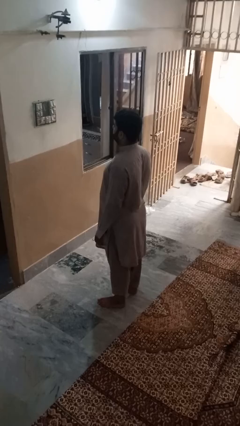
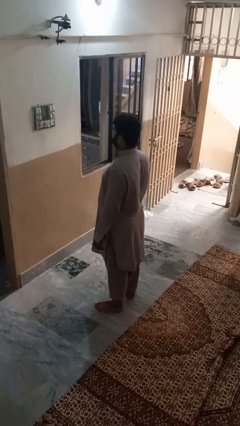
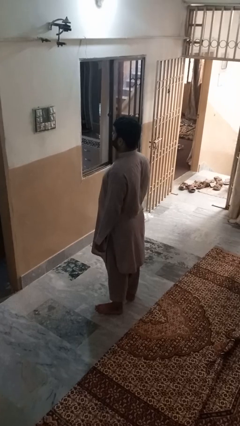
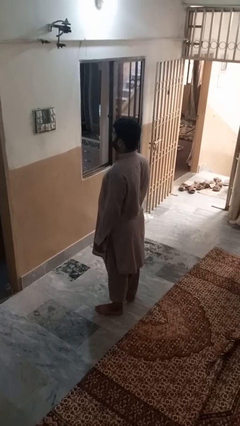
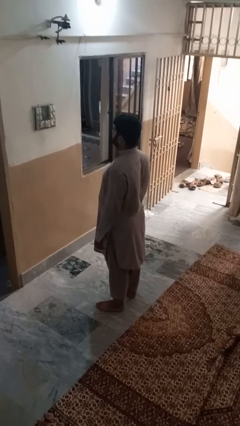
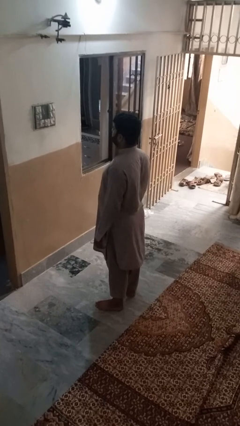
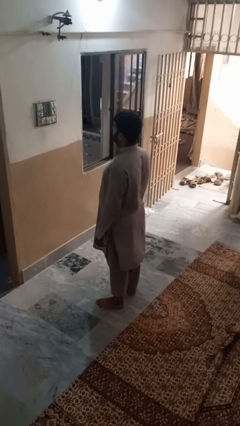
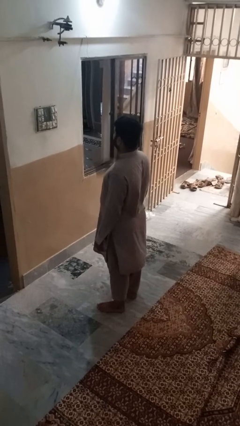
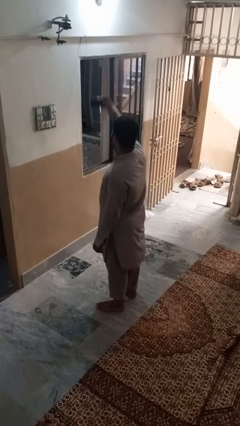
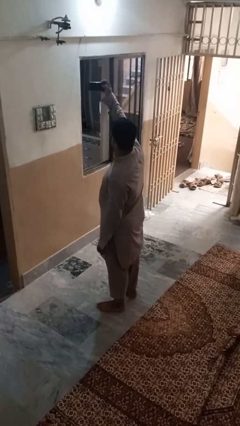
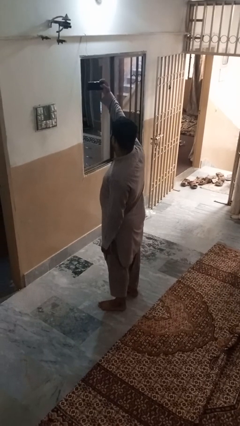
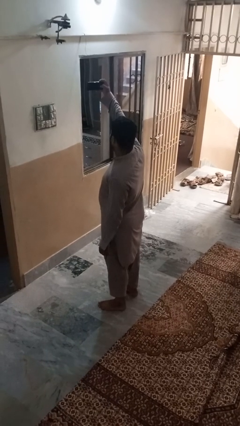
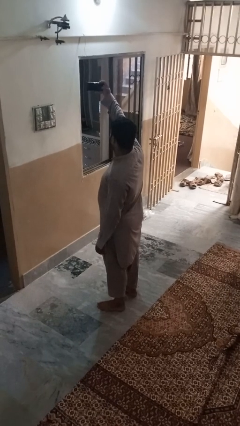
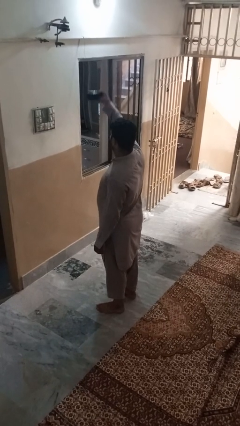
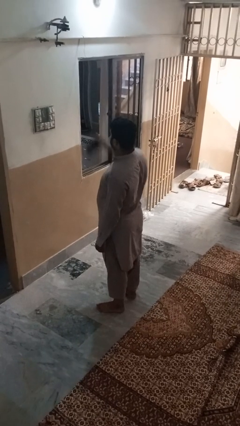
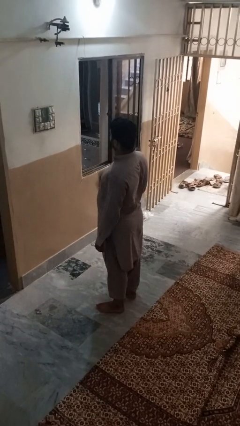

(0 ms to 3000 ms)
person takes selfie

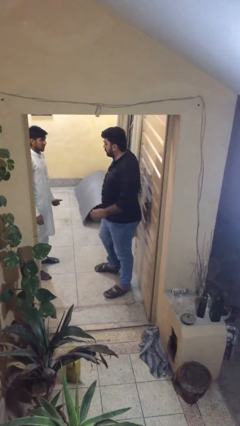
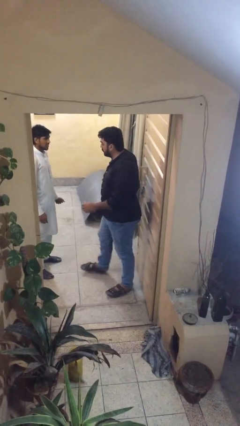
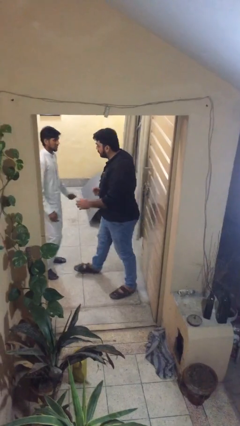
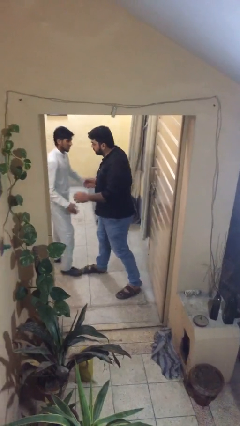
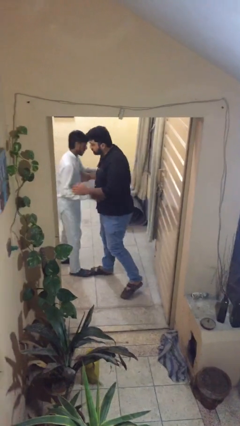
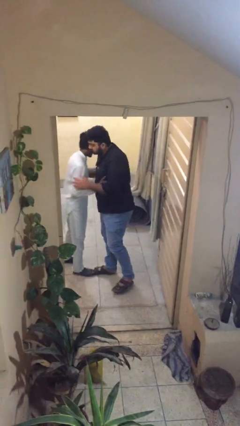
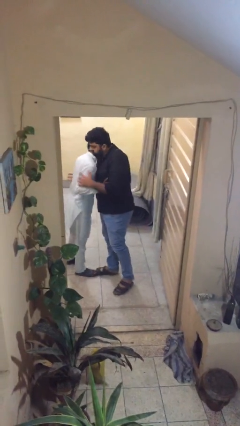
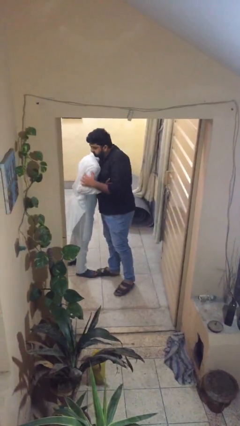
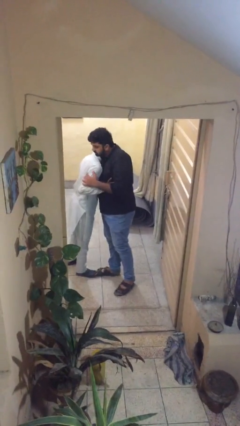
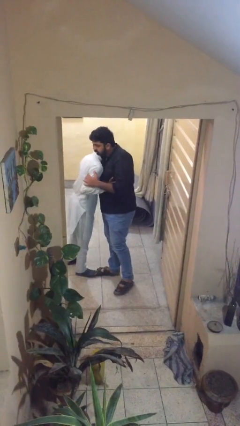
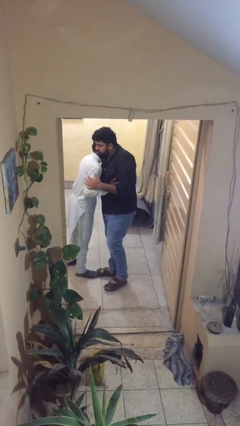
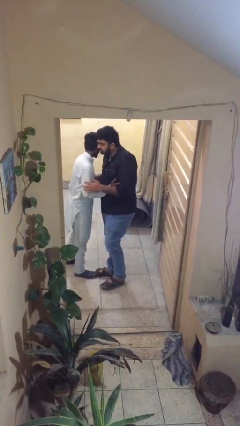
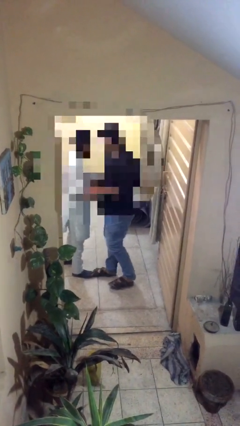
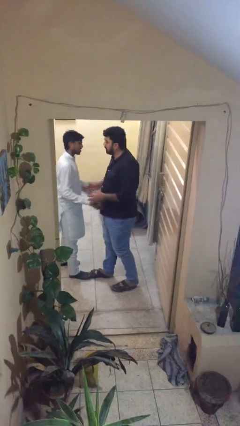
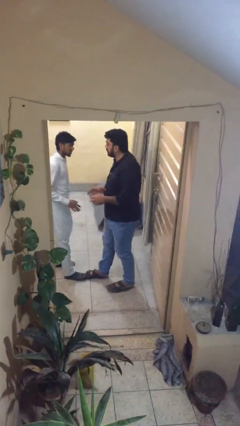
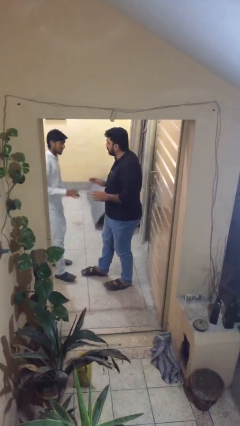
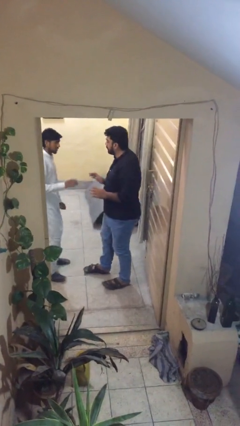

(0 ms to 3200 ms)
person embraces person

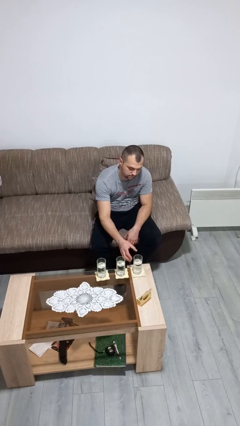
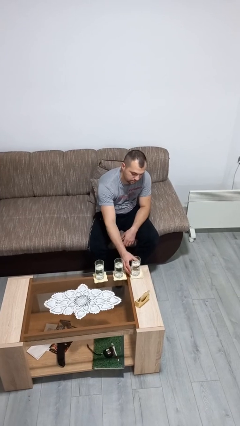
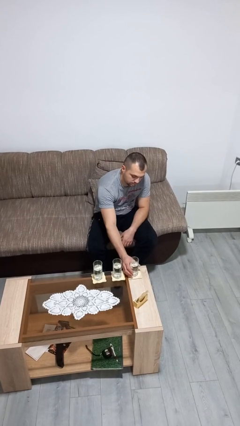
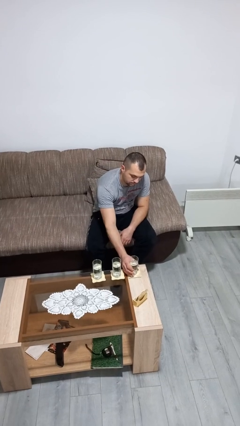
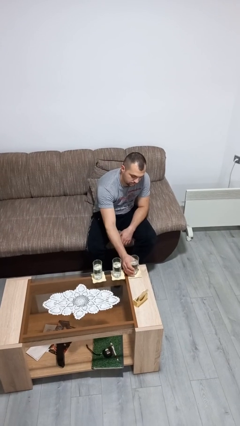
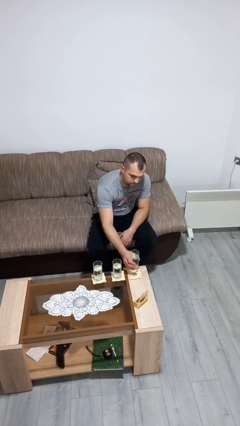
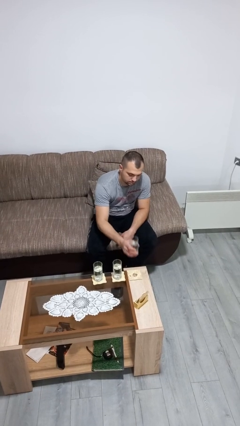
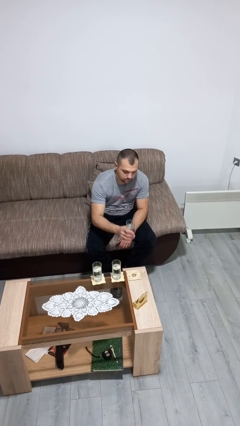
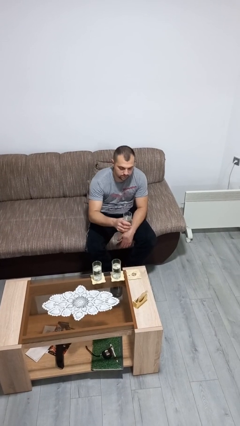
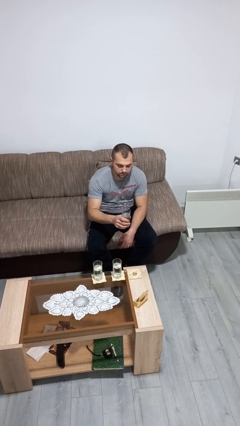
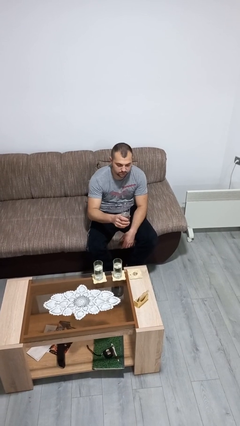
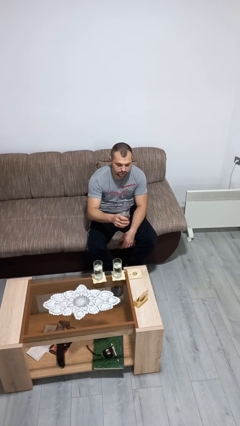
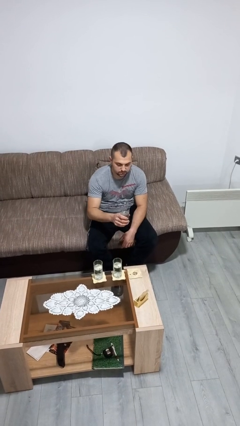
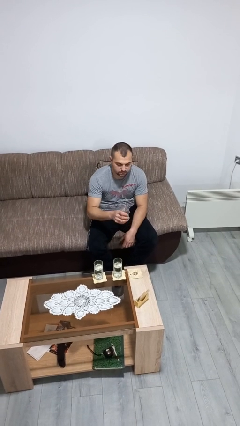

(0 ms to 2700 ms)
person picks up object from table

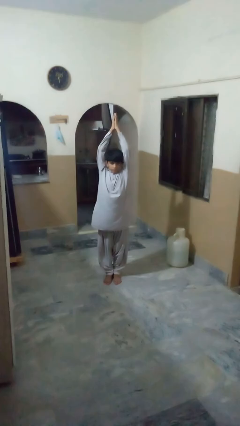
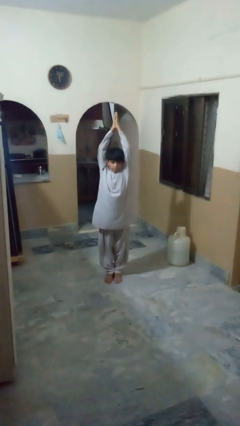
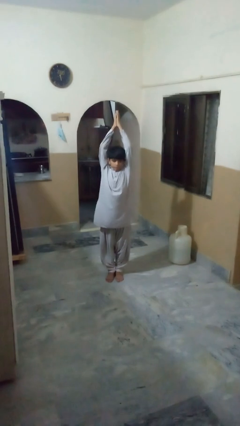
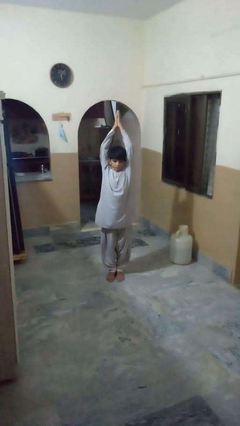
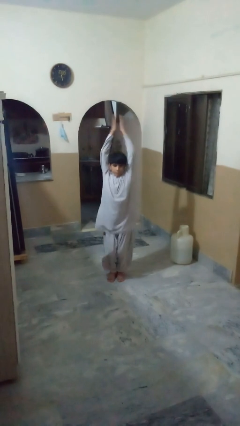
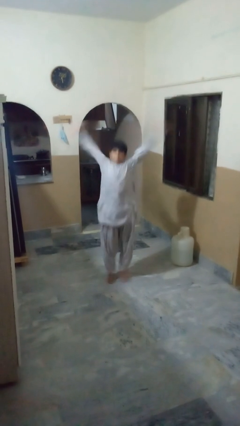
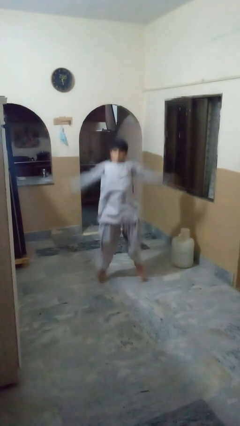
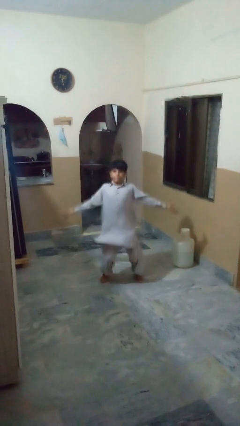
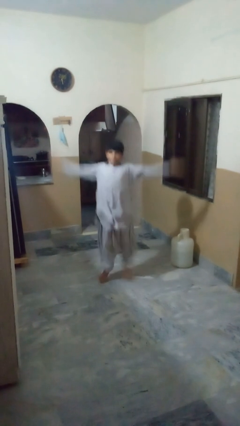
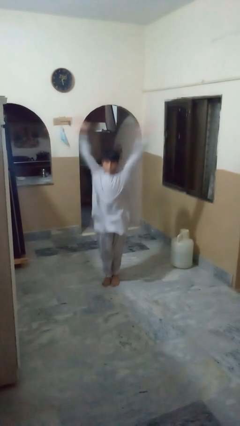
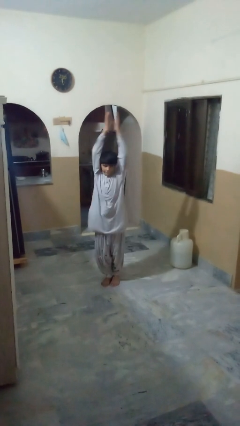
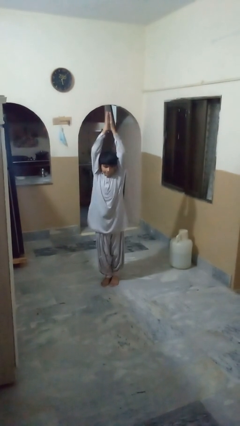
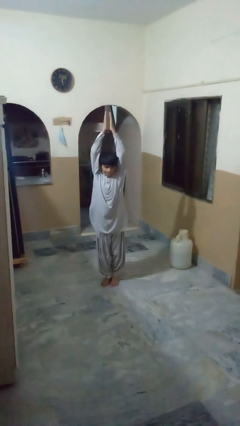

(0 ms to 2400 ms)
person exercises with jumping jacks

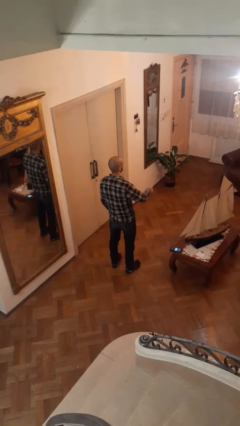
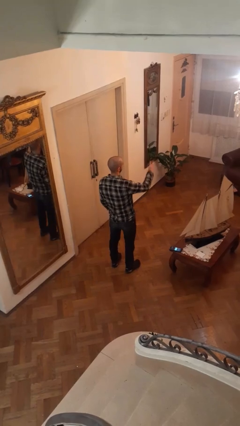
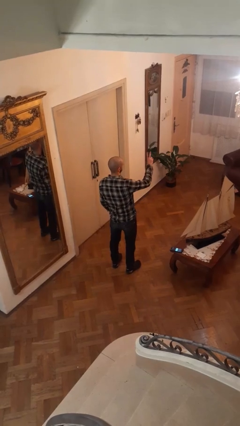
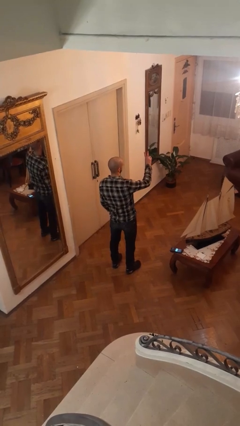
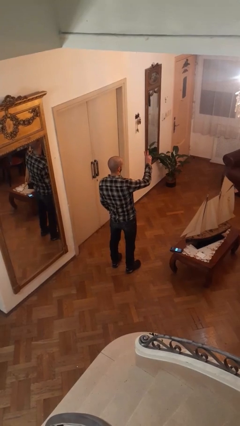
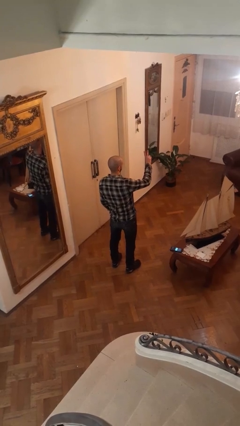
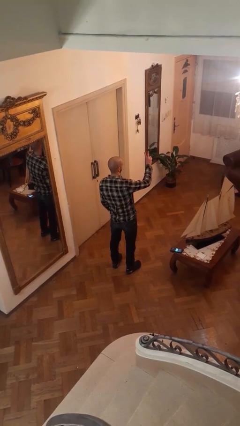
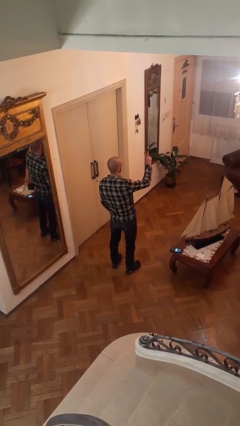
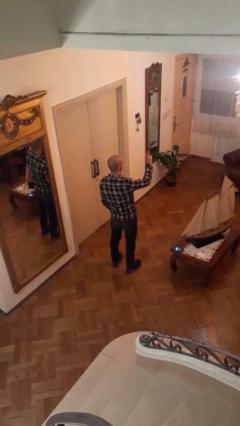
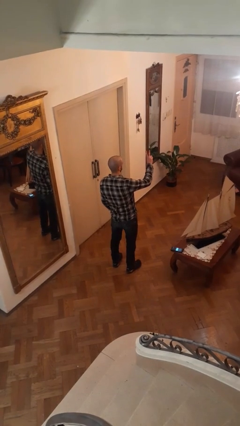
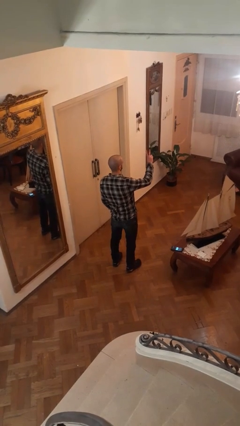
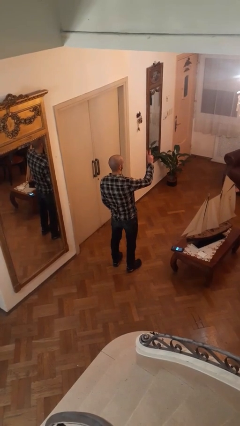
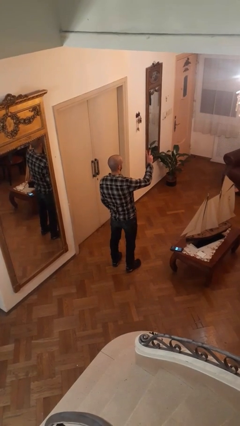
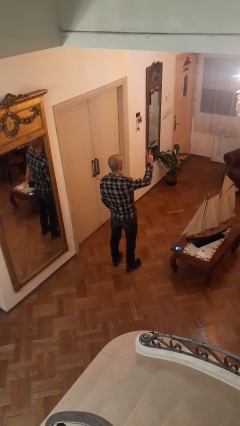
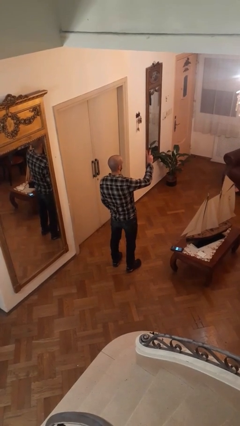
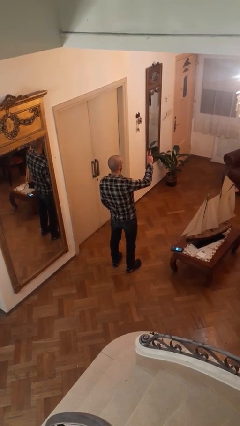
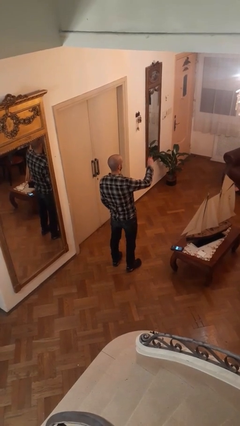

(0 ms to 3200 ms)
person gestures peace

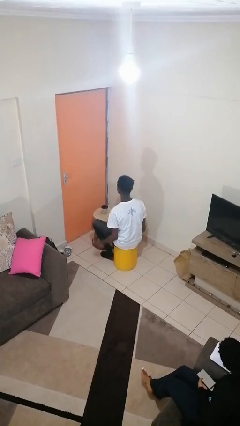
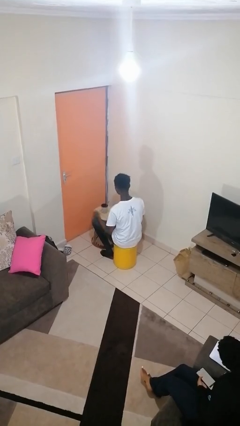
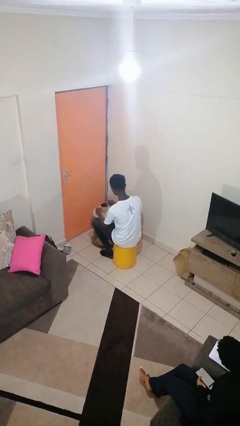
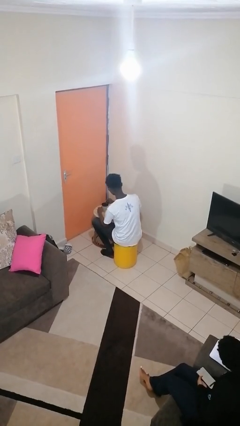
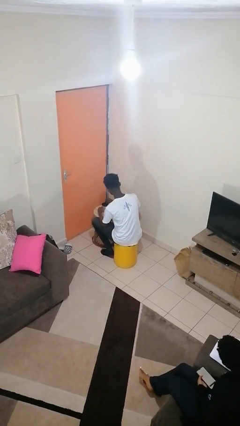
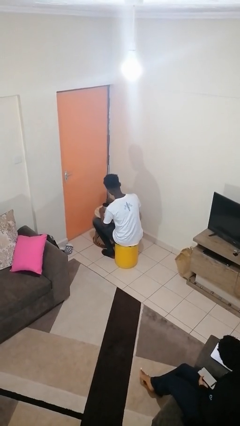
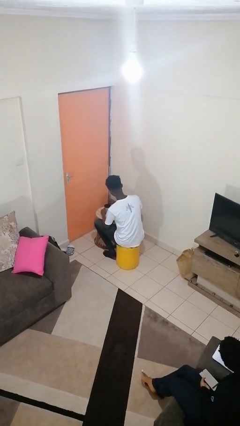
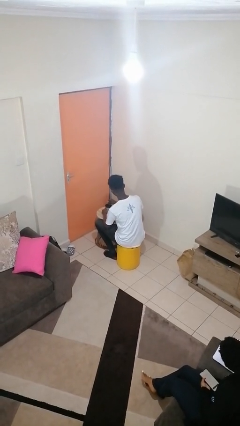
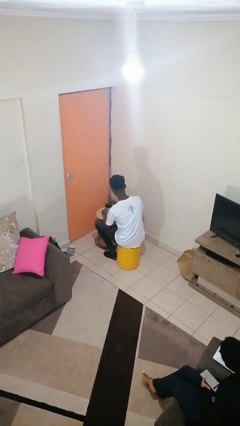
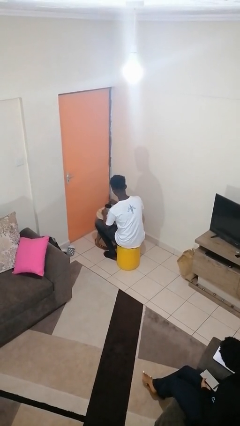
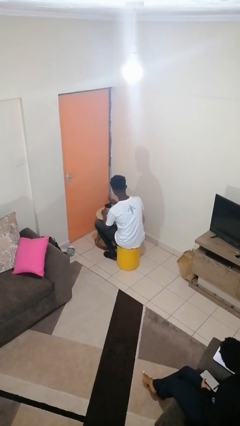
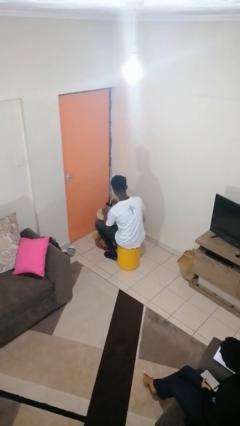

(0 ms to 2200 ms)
person stirs mug

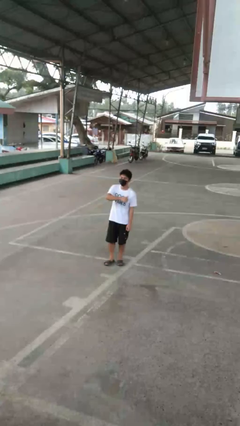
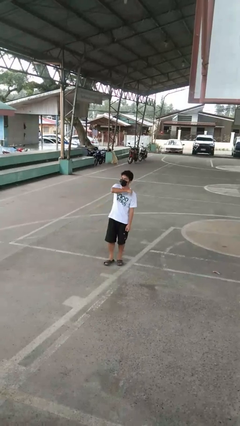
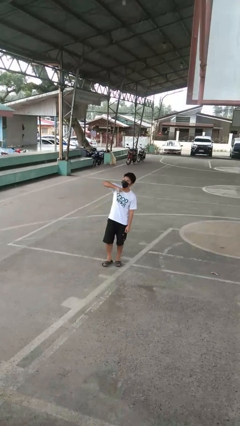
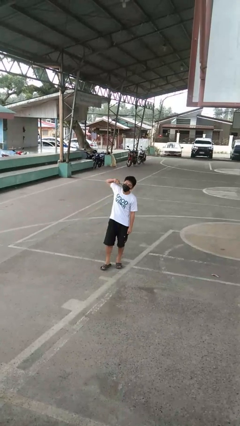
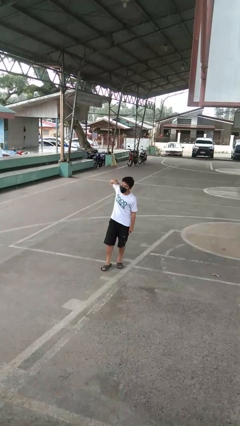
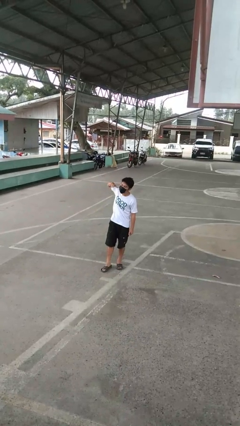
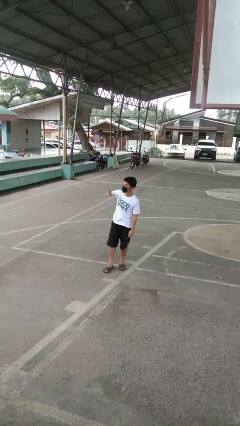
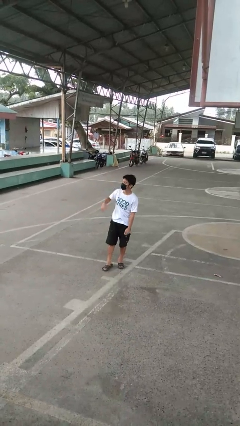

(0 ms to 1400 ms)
person gestures cut
